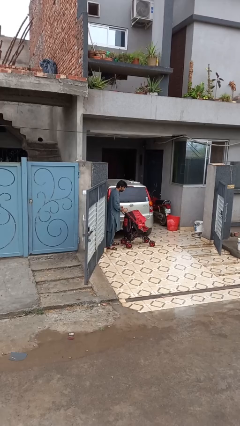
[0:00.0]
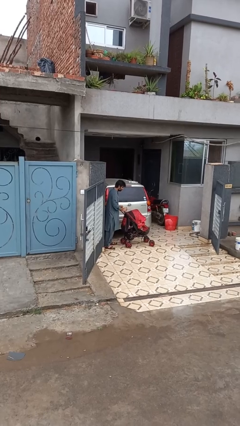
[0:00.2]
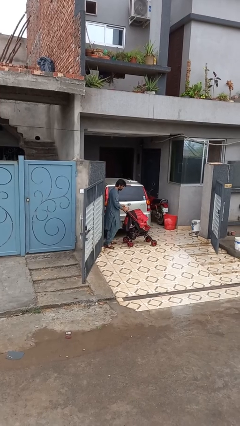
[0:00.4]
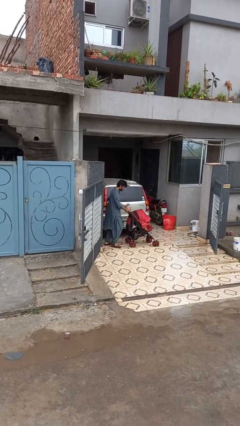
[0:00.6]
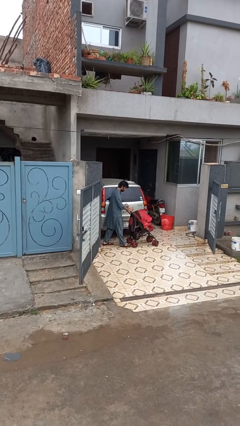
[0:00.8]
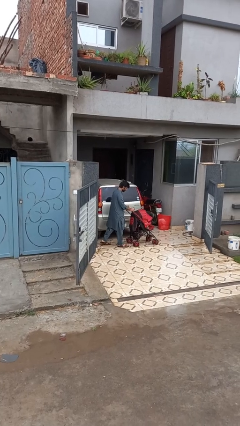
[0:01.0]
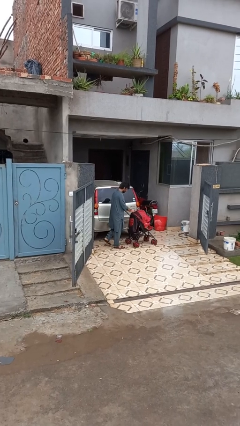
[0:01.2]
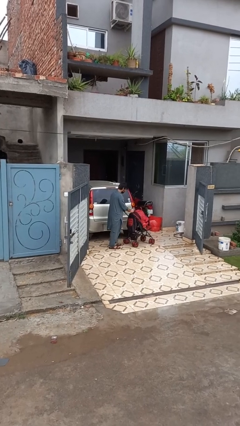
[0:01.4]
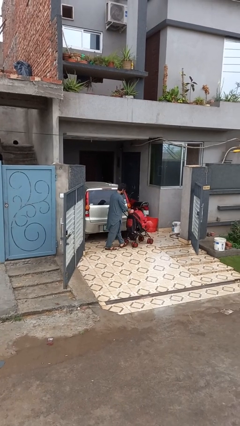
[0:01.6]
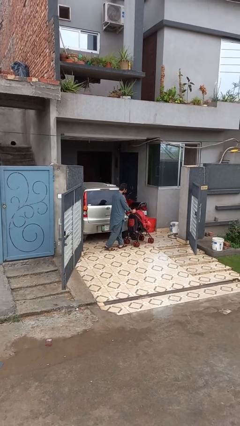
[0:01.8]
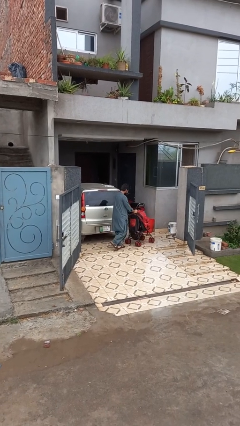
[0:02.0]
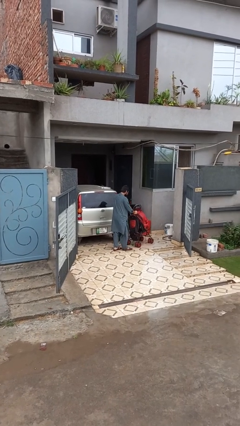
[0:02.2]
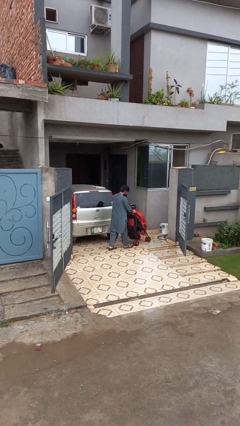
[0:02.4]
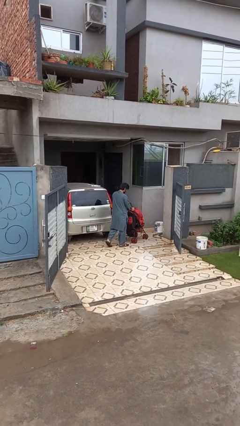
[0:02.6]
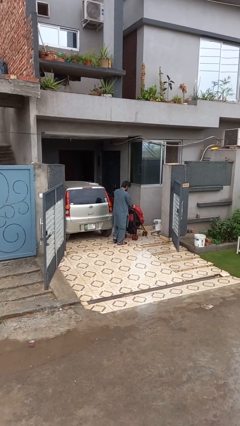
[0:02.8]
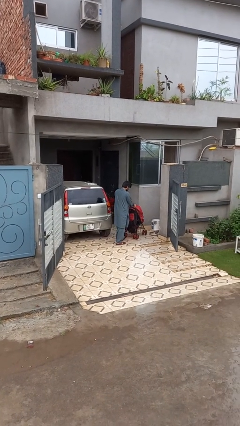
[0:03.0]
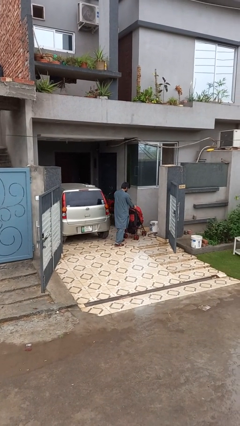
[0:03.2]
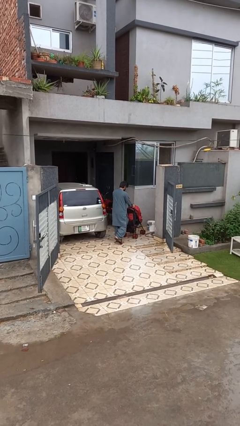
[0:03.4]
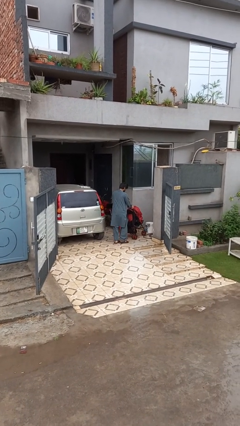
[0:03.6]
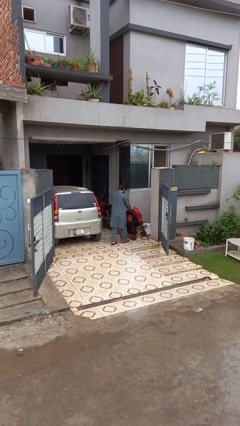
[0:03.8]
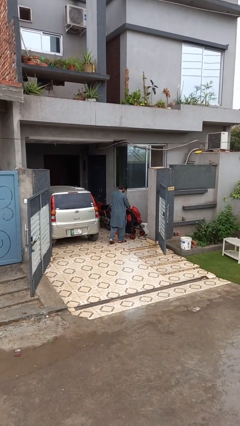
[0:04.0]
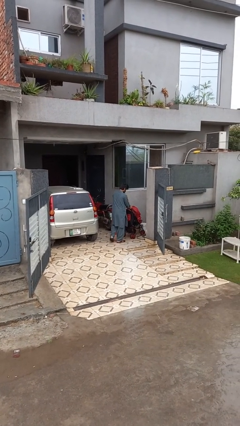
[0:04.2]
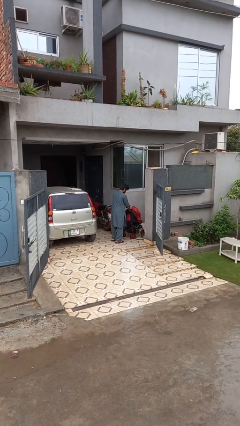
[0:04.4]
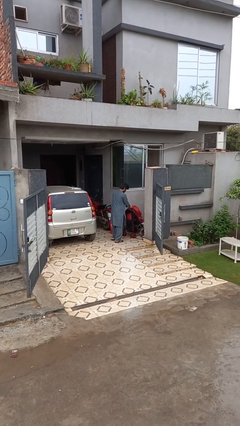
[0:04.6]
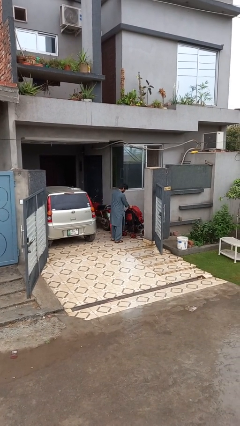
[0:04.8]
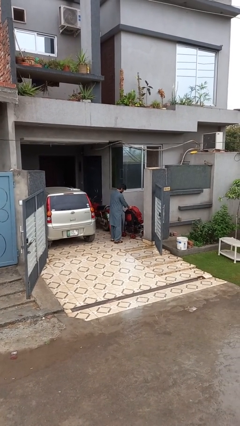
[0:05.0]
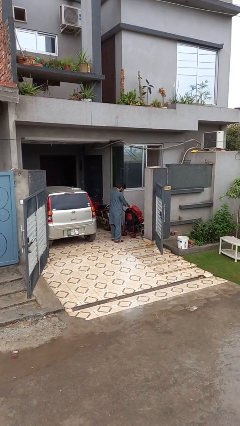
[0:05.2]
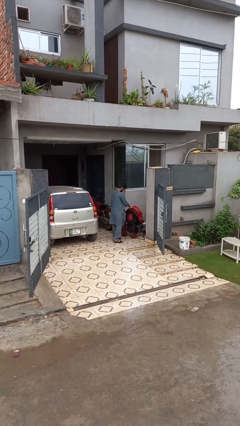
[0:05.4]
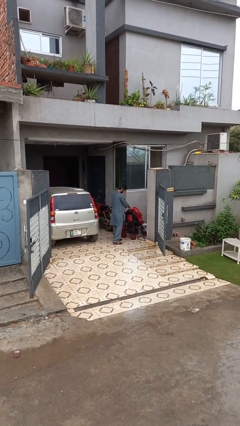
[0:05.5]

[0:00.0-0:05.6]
person pushes wheeled cart

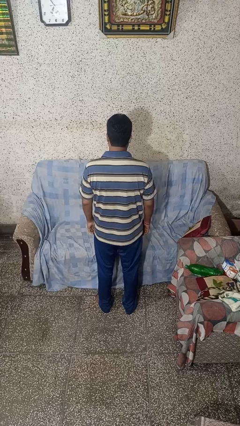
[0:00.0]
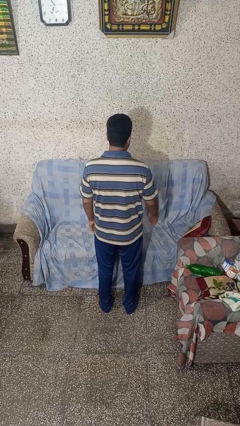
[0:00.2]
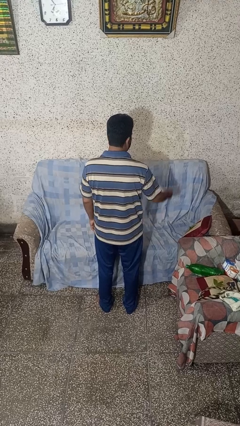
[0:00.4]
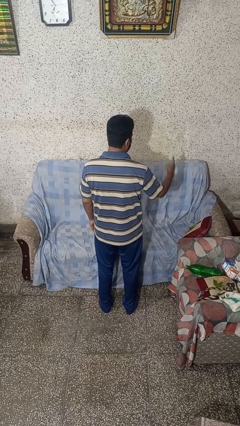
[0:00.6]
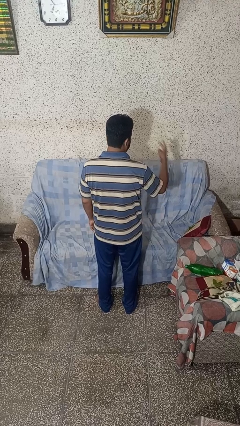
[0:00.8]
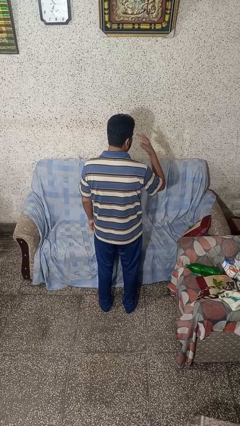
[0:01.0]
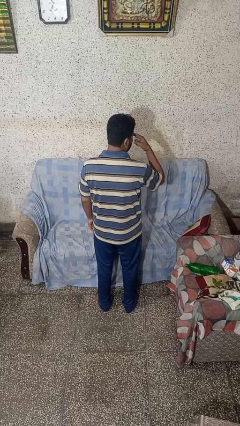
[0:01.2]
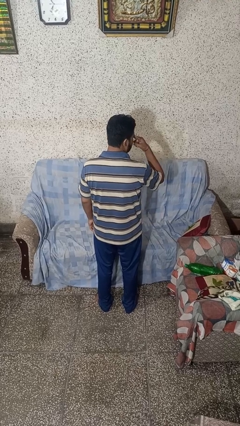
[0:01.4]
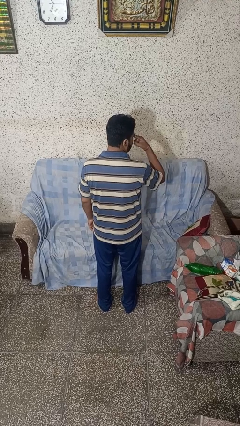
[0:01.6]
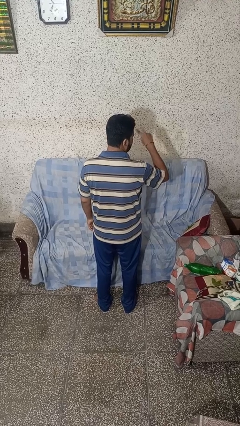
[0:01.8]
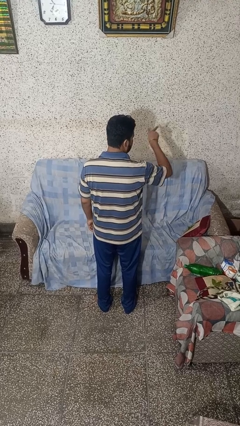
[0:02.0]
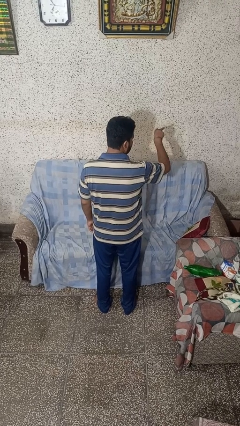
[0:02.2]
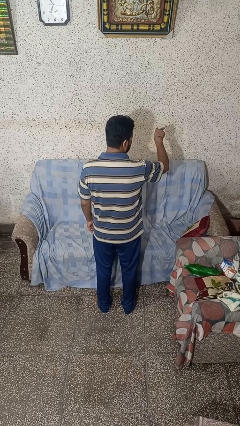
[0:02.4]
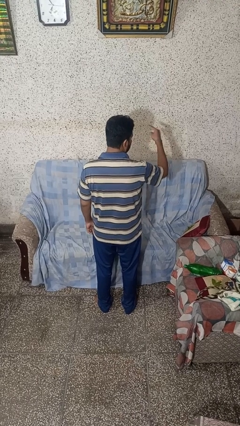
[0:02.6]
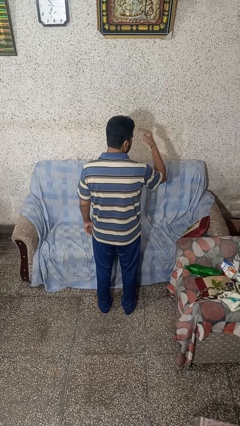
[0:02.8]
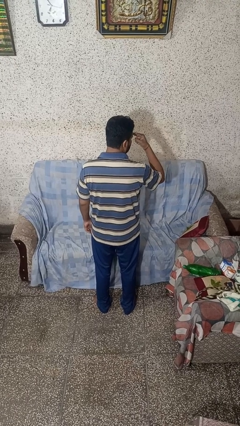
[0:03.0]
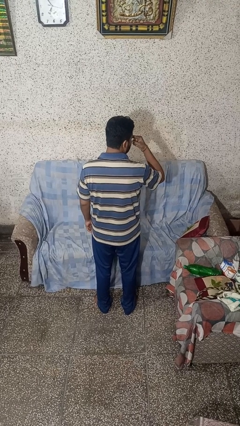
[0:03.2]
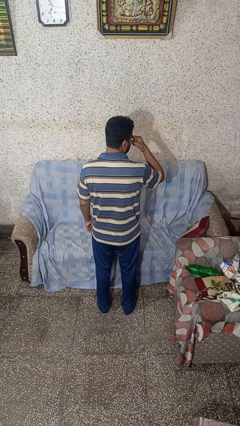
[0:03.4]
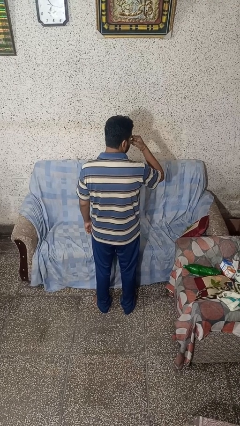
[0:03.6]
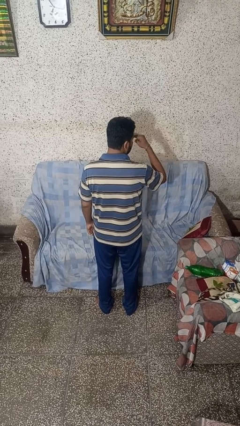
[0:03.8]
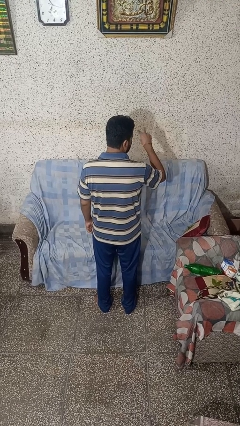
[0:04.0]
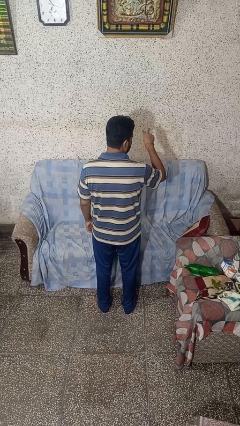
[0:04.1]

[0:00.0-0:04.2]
person gestures watch closely

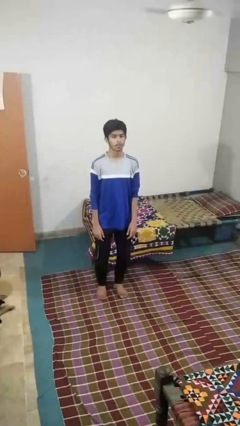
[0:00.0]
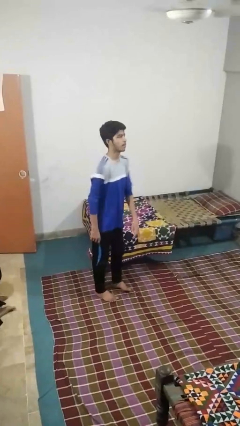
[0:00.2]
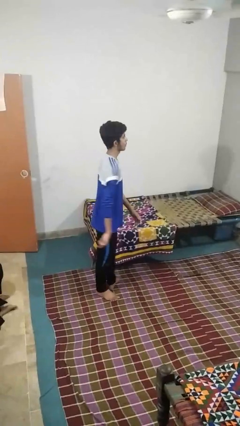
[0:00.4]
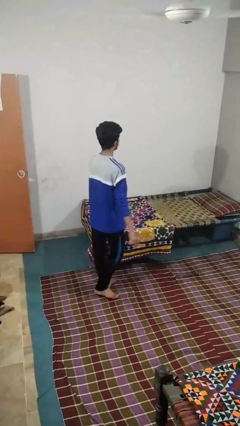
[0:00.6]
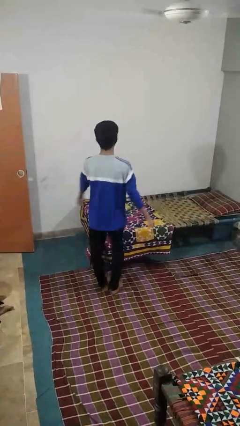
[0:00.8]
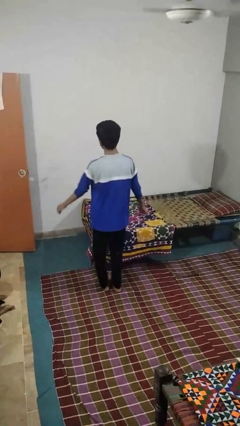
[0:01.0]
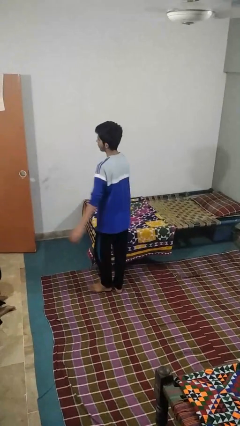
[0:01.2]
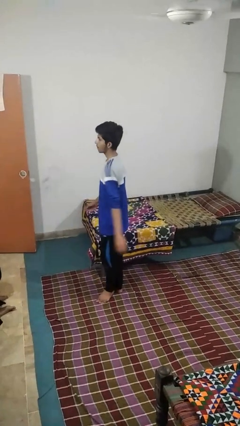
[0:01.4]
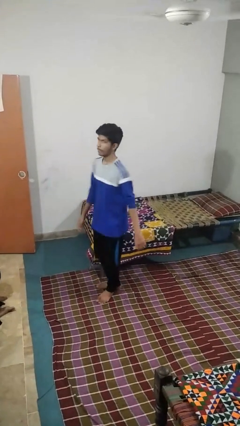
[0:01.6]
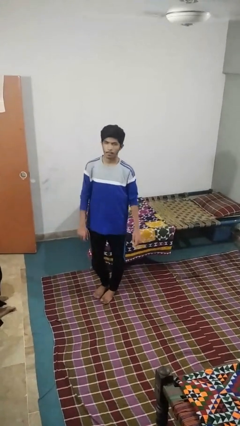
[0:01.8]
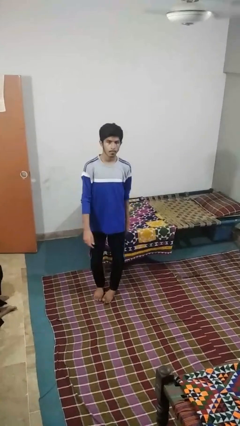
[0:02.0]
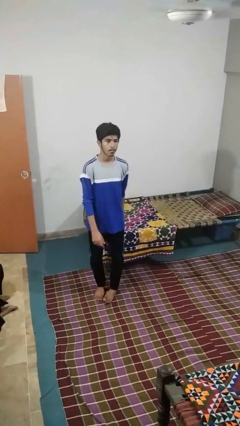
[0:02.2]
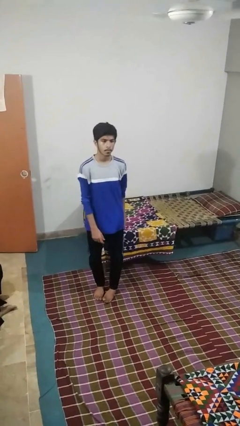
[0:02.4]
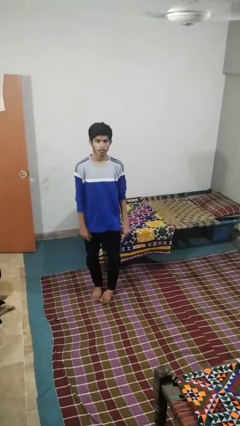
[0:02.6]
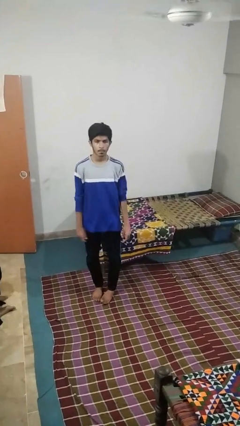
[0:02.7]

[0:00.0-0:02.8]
person twirls

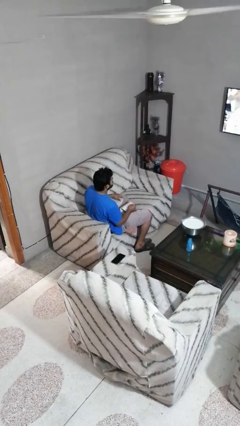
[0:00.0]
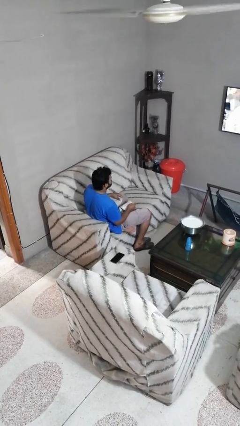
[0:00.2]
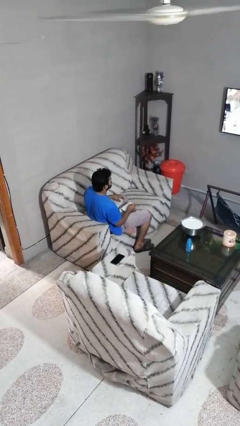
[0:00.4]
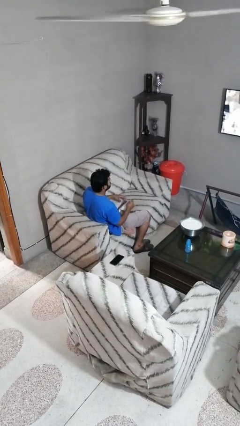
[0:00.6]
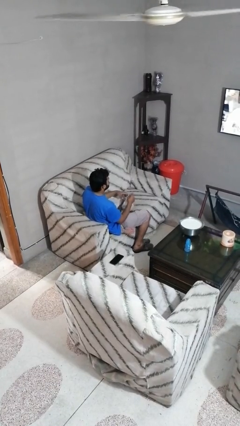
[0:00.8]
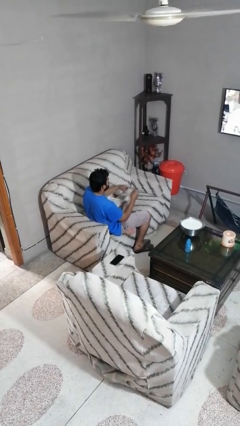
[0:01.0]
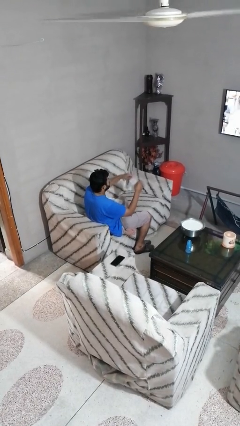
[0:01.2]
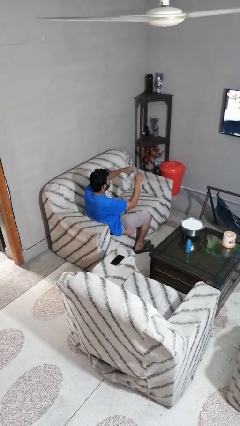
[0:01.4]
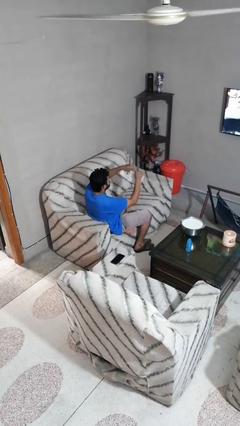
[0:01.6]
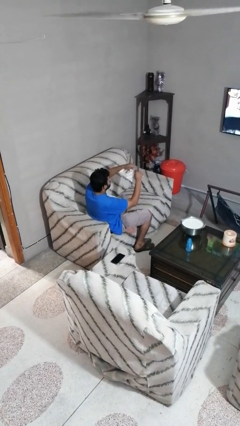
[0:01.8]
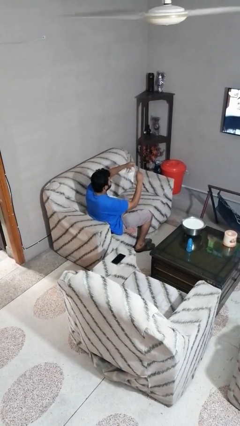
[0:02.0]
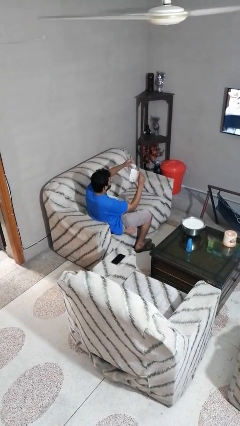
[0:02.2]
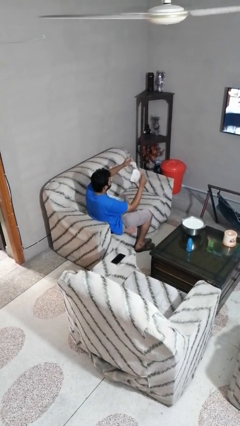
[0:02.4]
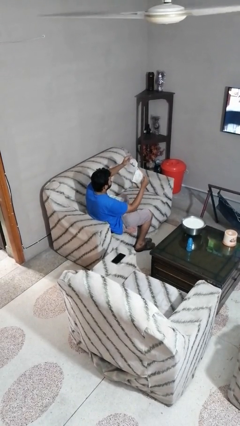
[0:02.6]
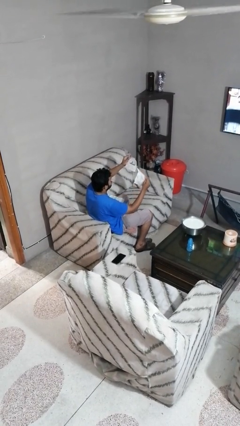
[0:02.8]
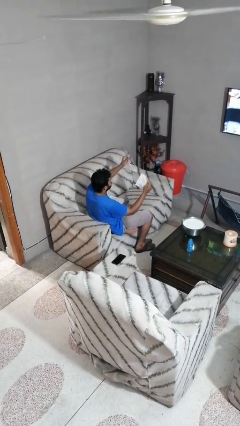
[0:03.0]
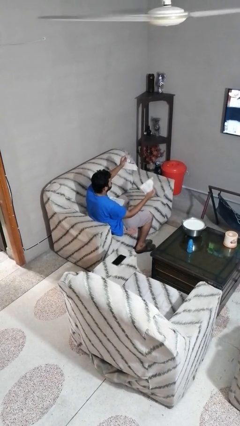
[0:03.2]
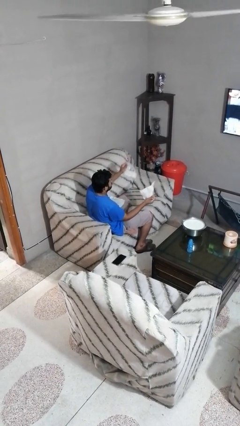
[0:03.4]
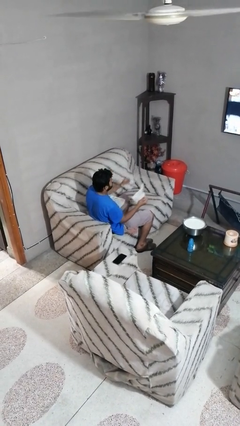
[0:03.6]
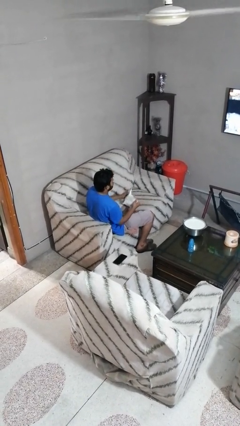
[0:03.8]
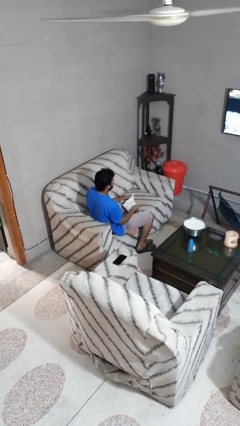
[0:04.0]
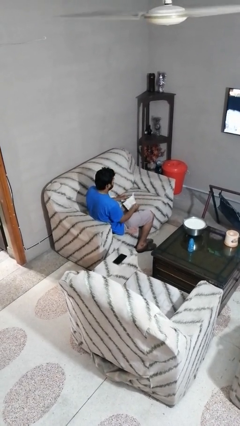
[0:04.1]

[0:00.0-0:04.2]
person tears paper

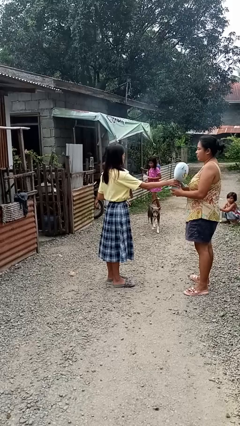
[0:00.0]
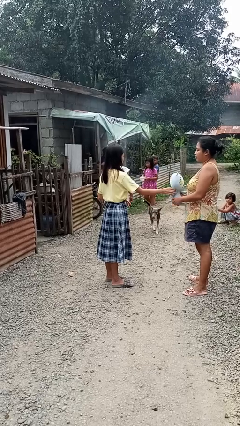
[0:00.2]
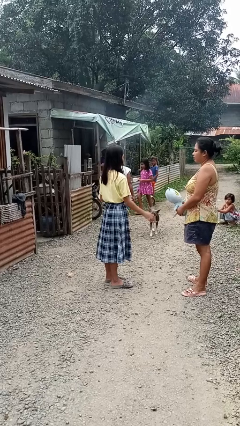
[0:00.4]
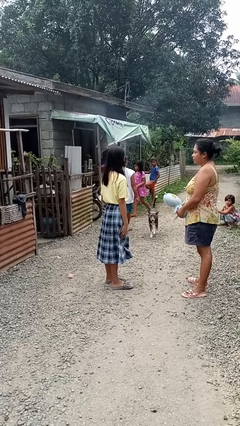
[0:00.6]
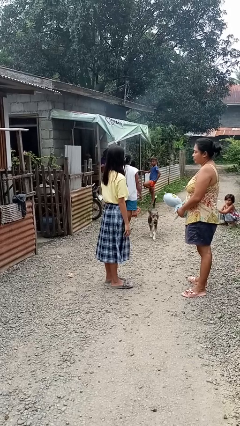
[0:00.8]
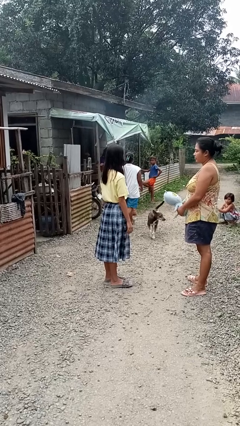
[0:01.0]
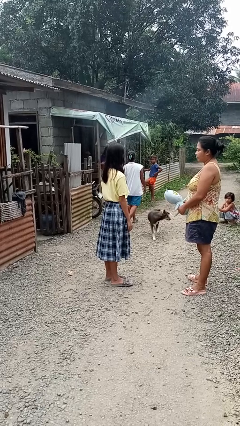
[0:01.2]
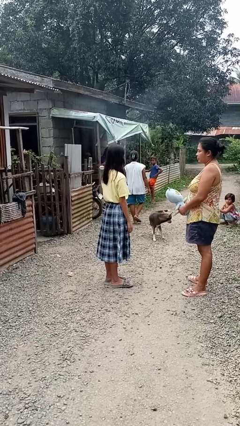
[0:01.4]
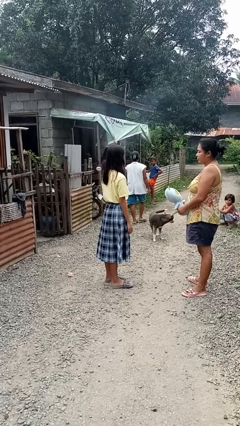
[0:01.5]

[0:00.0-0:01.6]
person transfers object to person
